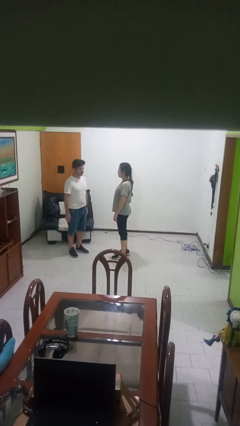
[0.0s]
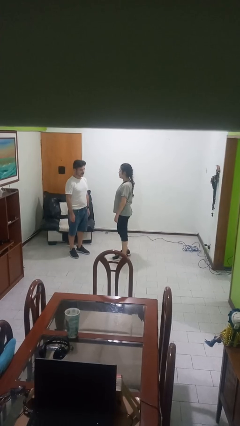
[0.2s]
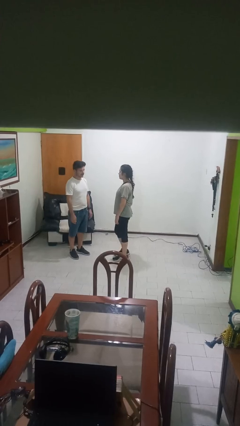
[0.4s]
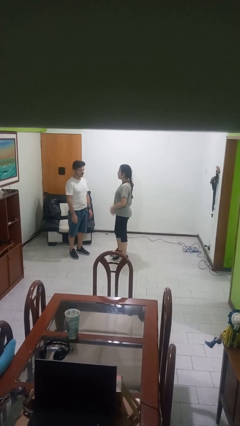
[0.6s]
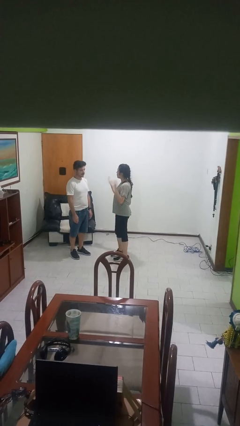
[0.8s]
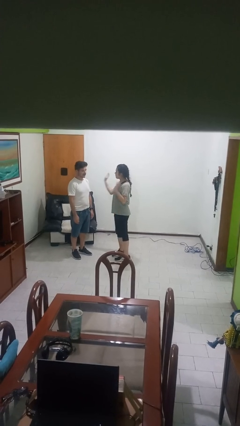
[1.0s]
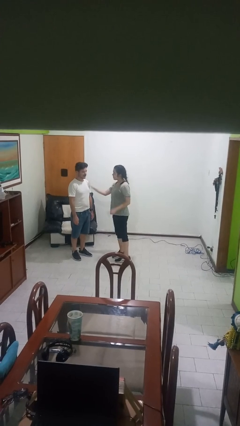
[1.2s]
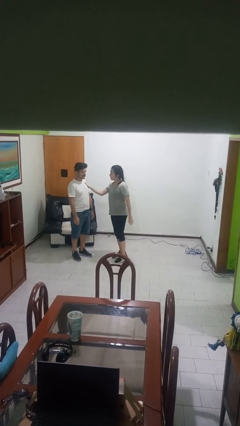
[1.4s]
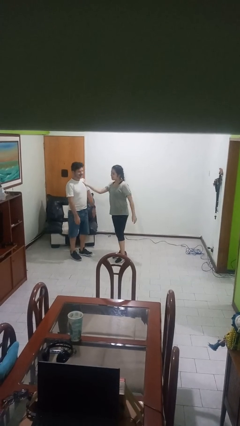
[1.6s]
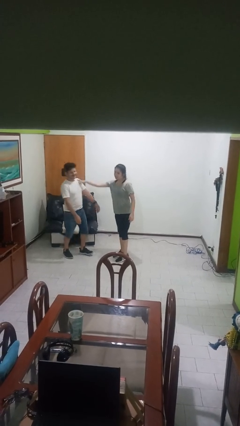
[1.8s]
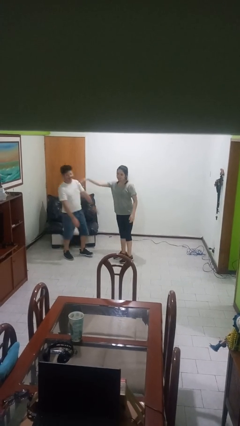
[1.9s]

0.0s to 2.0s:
person shoves person

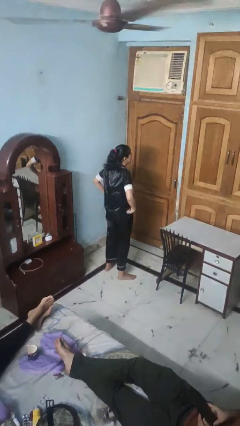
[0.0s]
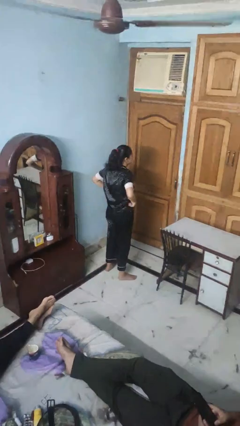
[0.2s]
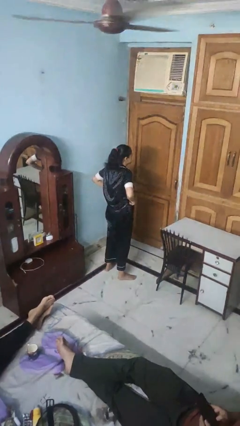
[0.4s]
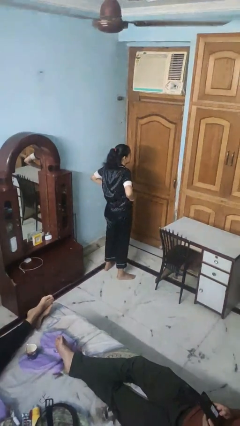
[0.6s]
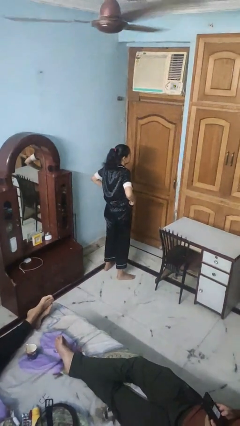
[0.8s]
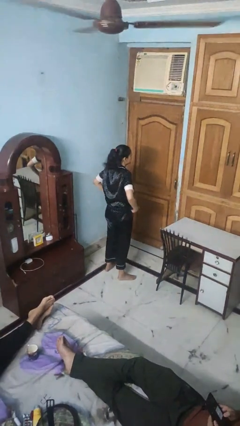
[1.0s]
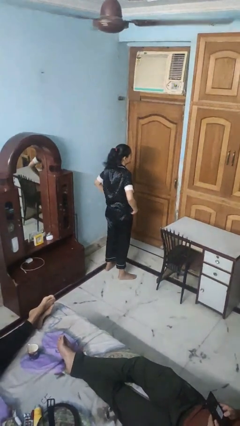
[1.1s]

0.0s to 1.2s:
person hikes up pants

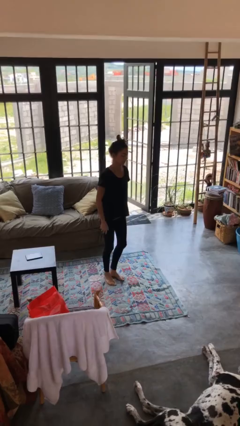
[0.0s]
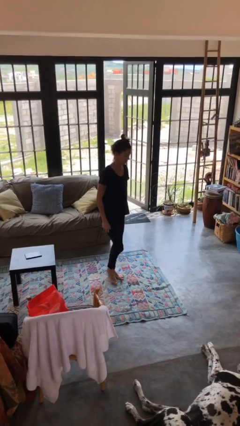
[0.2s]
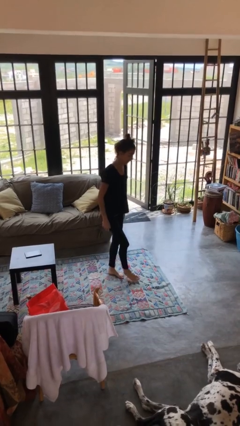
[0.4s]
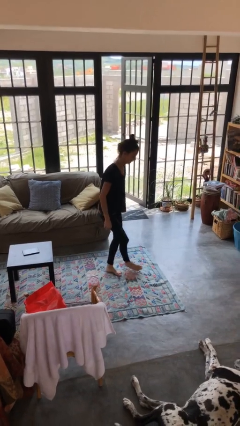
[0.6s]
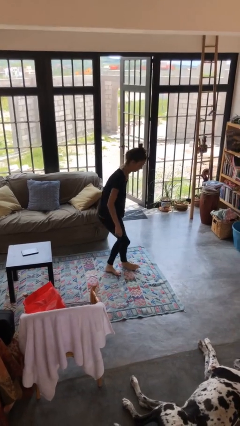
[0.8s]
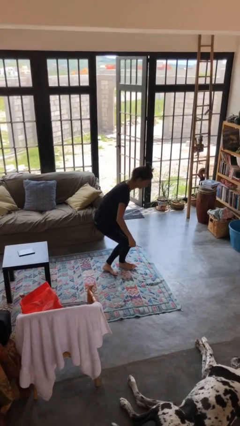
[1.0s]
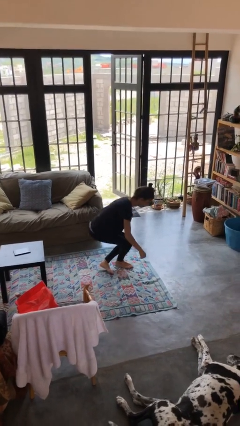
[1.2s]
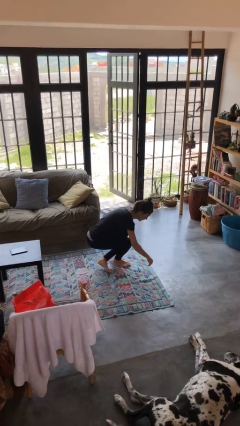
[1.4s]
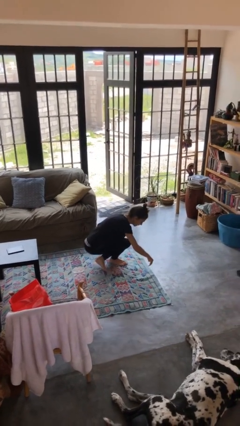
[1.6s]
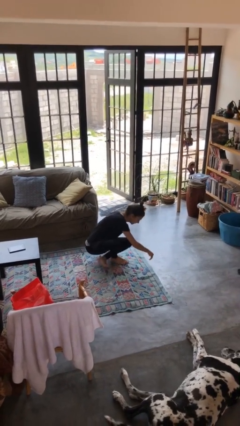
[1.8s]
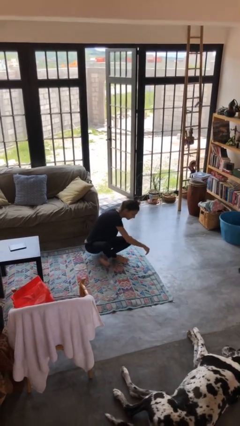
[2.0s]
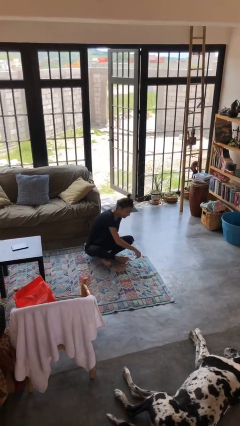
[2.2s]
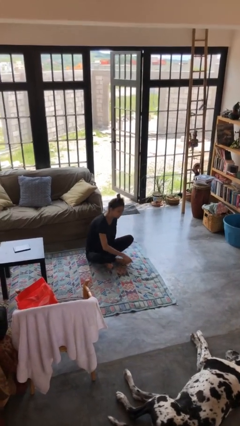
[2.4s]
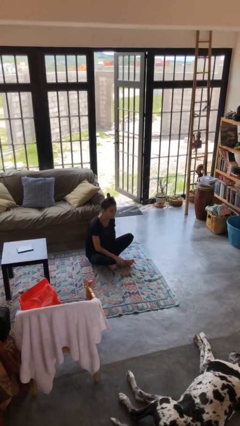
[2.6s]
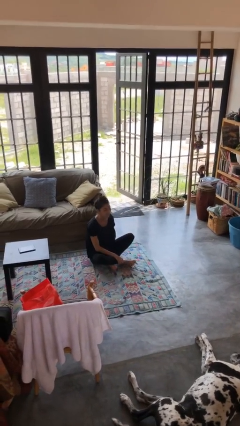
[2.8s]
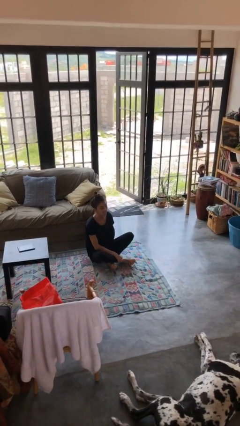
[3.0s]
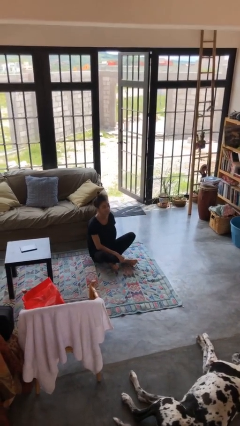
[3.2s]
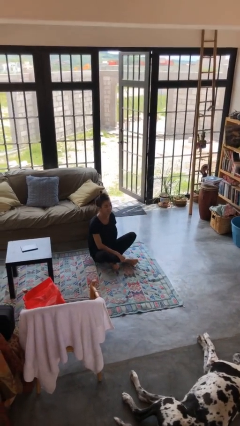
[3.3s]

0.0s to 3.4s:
person sits crisscross

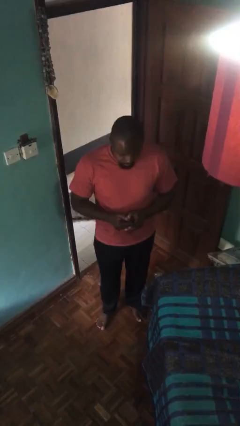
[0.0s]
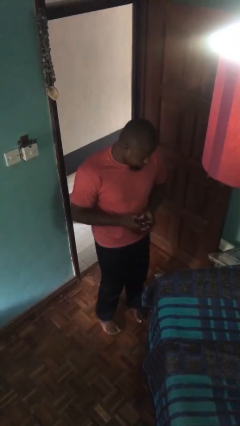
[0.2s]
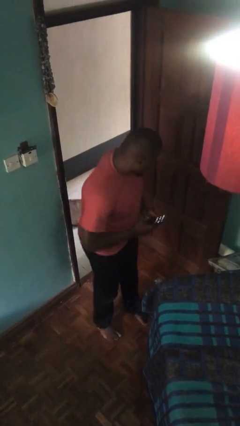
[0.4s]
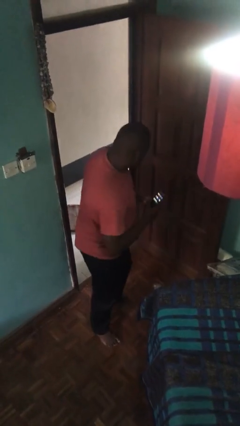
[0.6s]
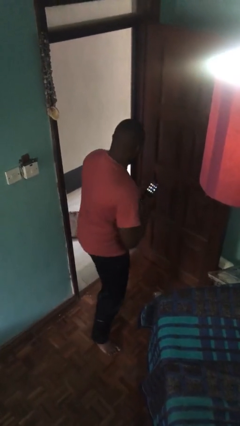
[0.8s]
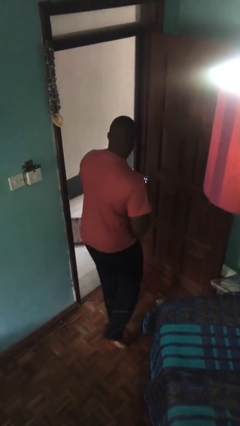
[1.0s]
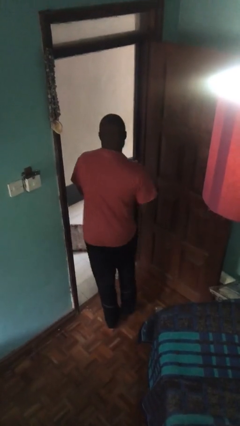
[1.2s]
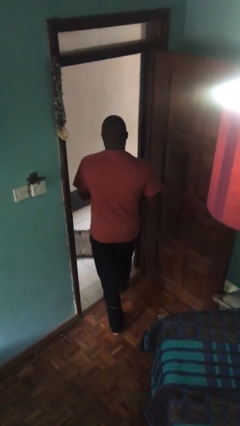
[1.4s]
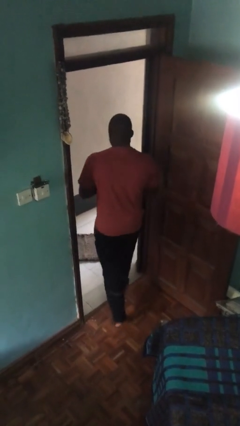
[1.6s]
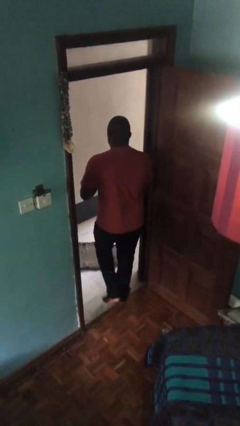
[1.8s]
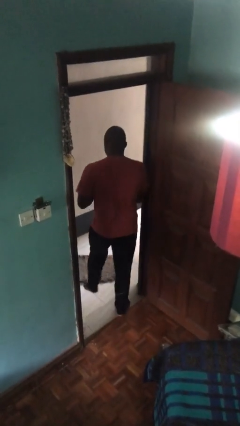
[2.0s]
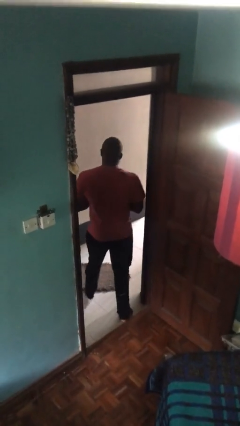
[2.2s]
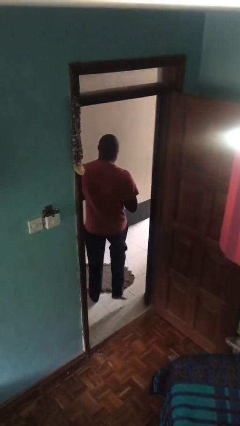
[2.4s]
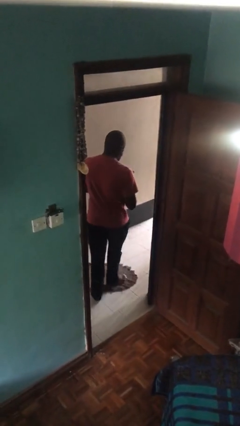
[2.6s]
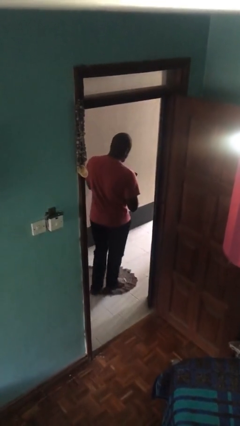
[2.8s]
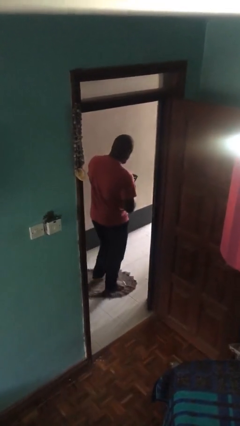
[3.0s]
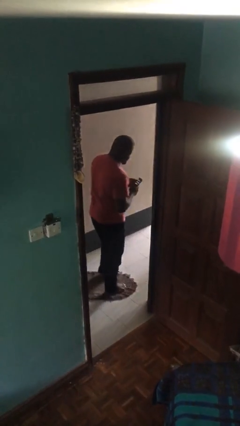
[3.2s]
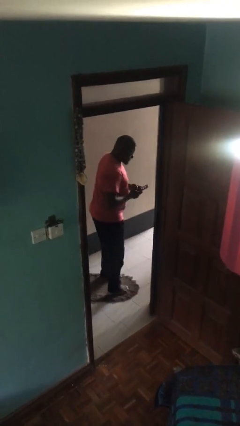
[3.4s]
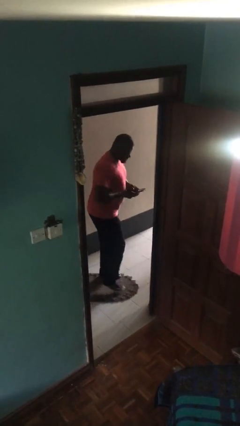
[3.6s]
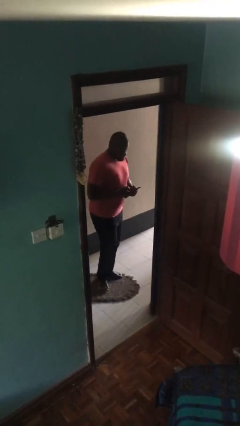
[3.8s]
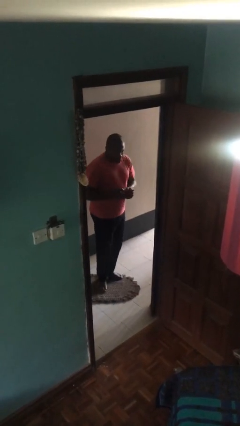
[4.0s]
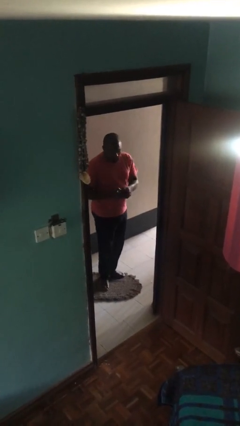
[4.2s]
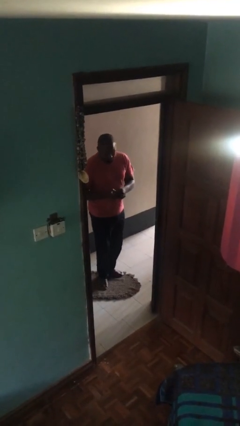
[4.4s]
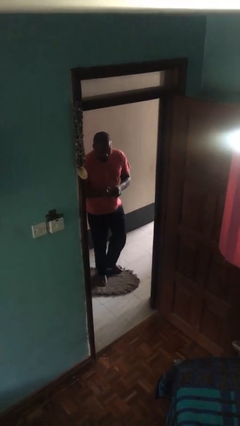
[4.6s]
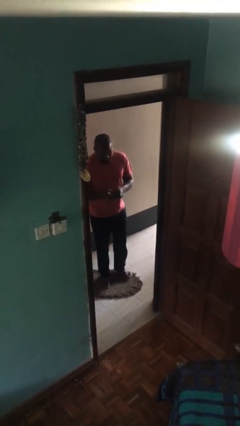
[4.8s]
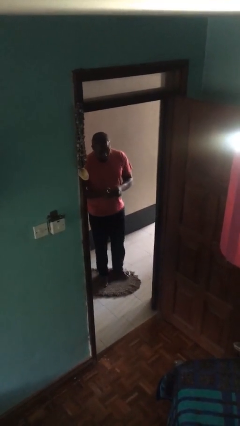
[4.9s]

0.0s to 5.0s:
person exits scene through structure

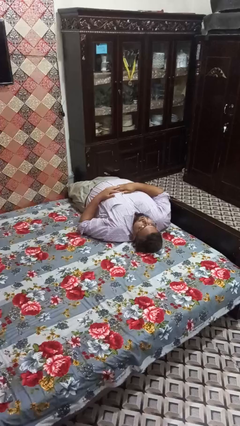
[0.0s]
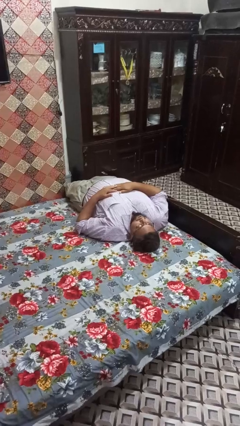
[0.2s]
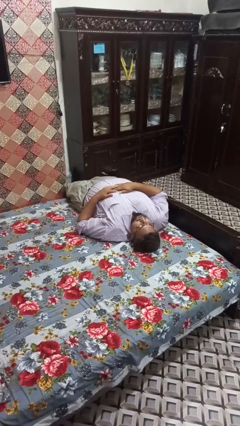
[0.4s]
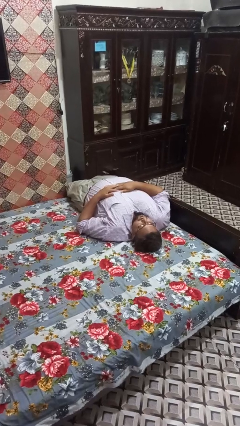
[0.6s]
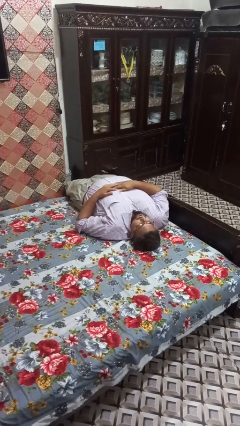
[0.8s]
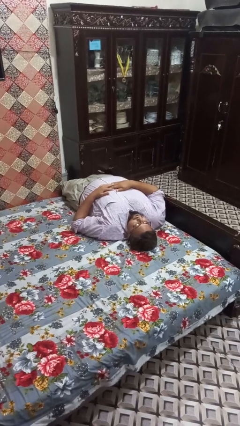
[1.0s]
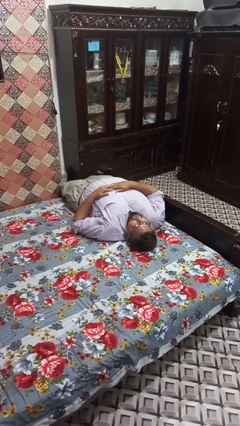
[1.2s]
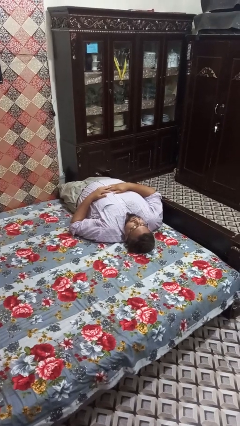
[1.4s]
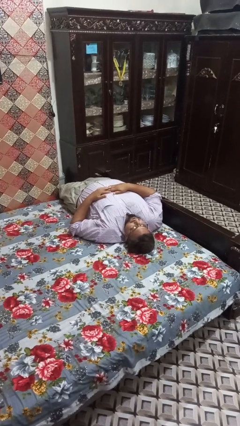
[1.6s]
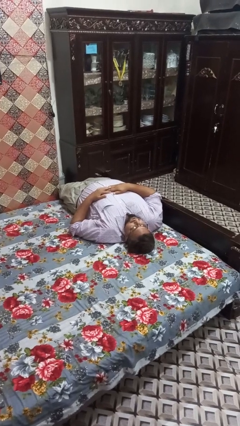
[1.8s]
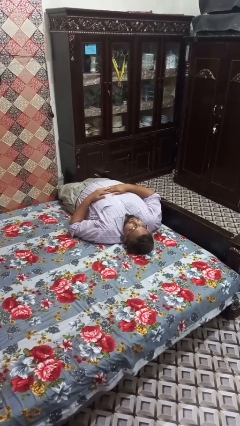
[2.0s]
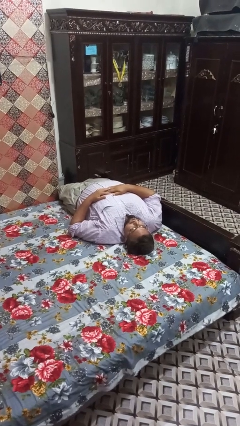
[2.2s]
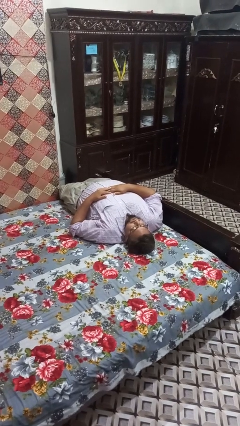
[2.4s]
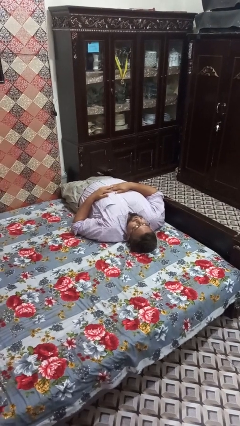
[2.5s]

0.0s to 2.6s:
person lies down on bed

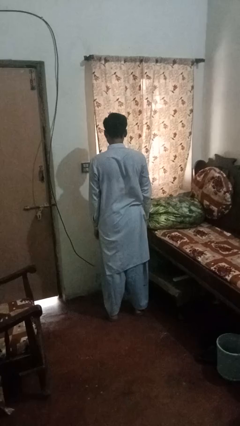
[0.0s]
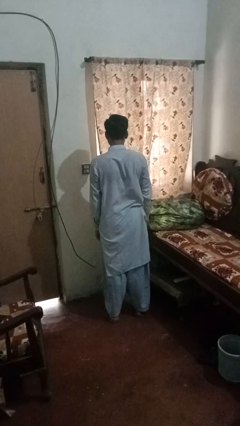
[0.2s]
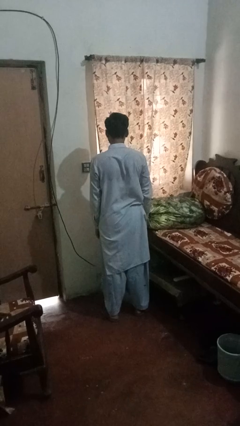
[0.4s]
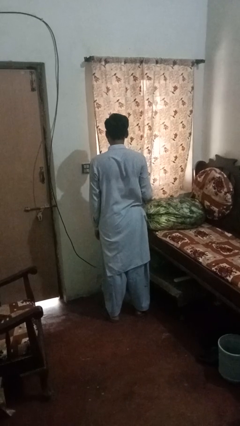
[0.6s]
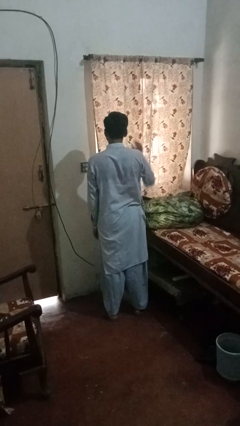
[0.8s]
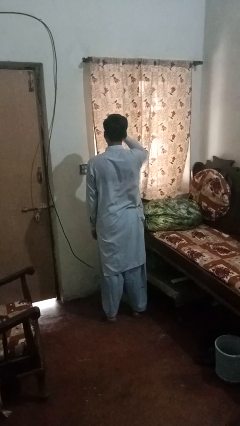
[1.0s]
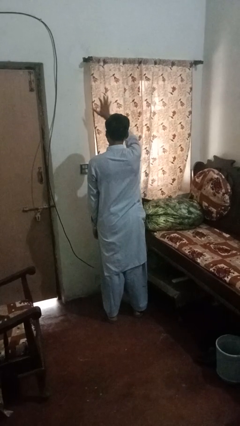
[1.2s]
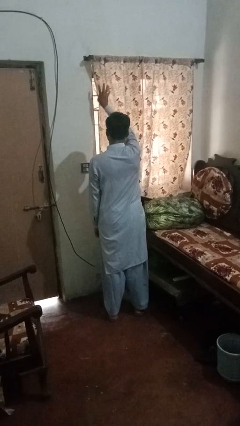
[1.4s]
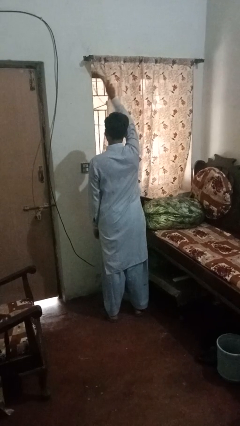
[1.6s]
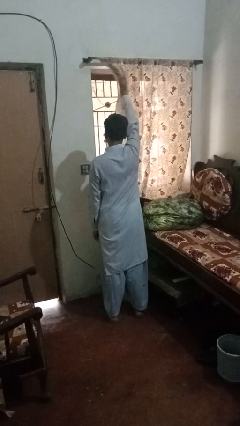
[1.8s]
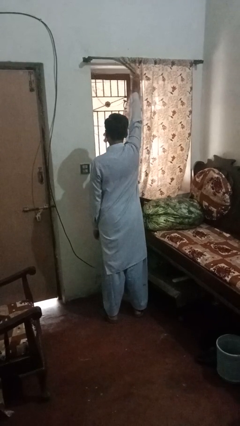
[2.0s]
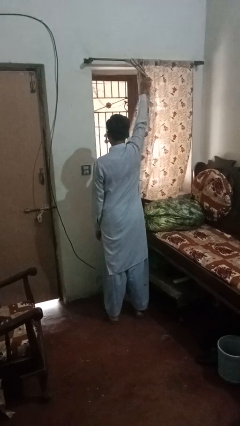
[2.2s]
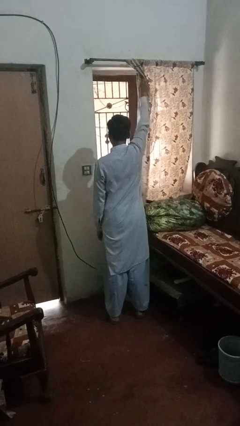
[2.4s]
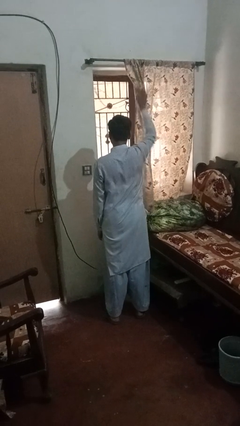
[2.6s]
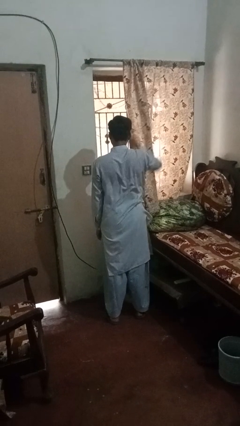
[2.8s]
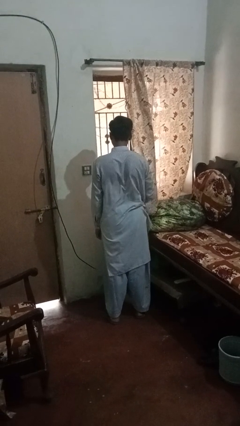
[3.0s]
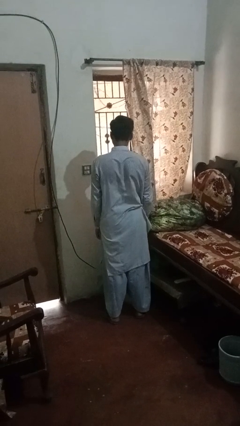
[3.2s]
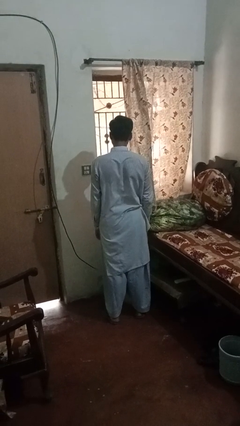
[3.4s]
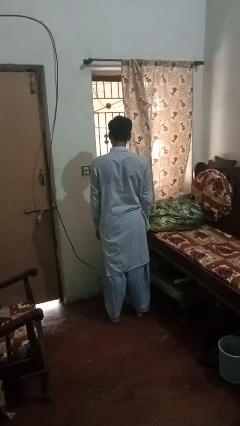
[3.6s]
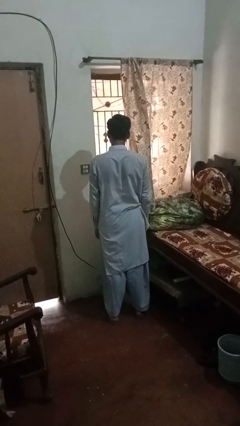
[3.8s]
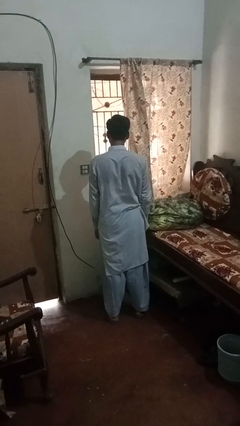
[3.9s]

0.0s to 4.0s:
person opens curtains
